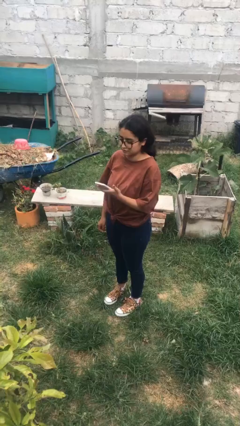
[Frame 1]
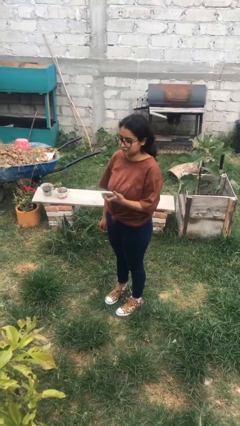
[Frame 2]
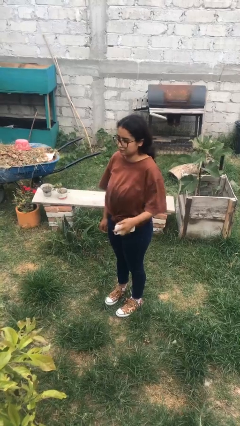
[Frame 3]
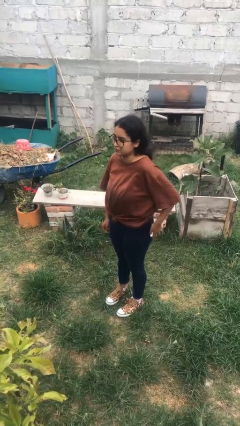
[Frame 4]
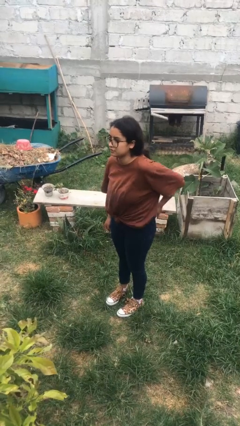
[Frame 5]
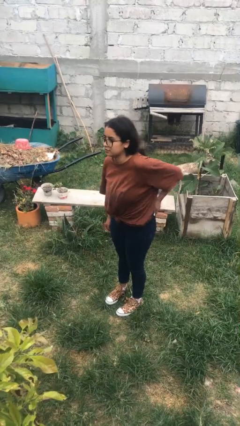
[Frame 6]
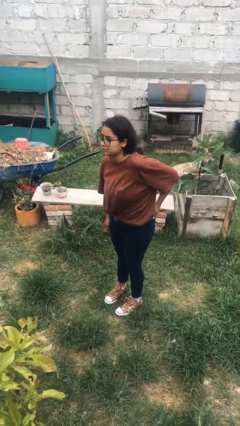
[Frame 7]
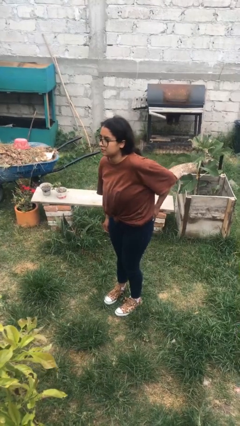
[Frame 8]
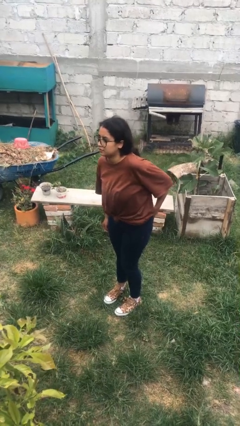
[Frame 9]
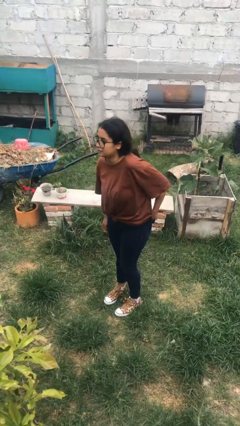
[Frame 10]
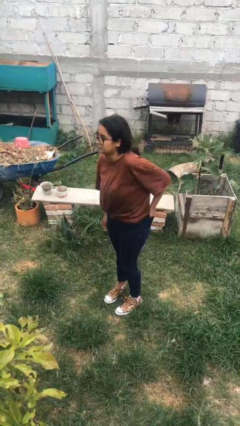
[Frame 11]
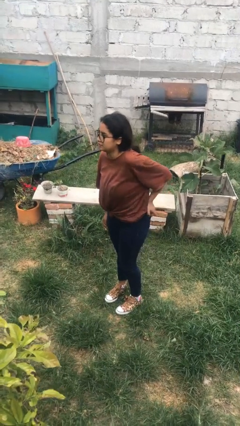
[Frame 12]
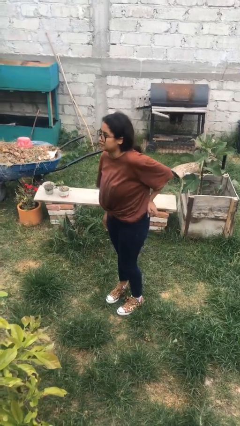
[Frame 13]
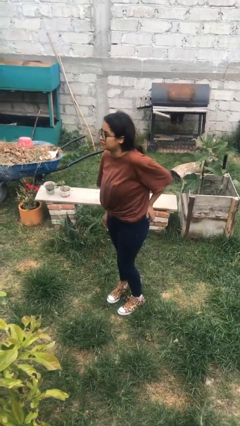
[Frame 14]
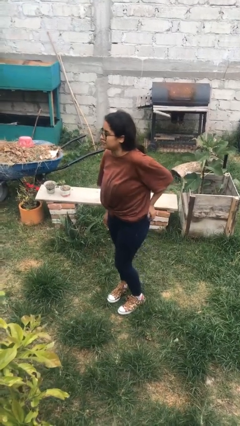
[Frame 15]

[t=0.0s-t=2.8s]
person puts phone into pocket

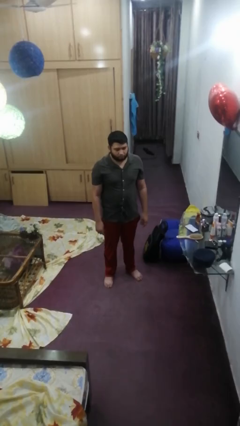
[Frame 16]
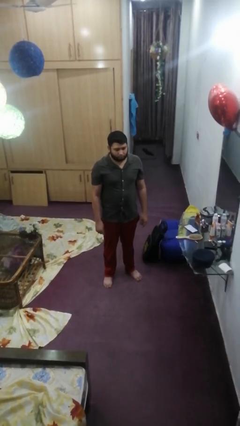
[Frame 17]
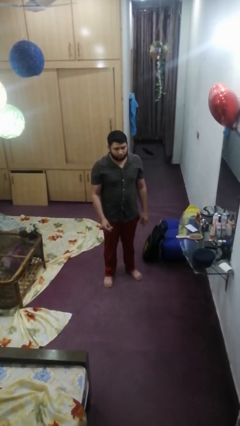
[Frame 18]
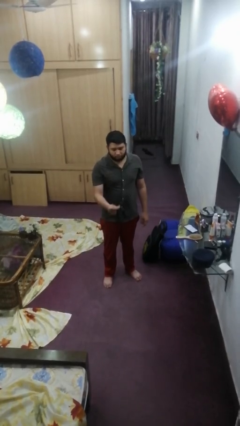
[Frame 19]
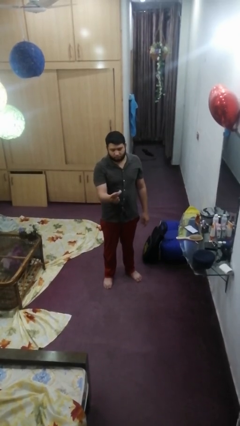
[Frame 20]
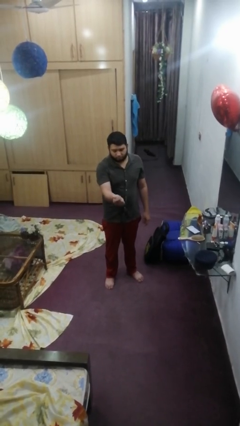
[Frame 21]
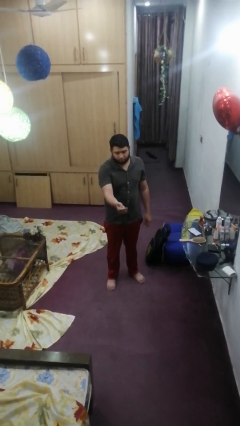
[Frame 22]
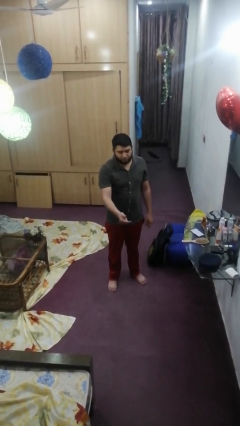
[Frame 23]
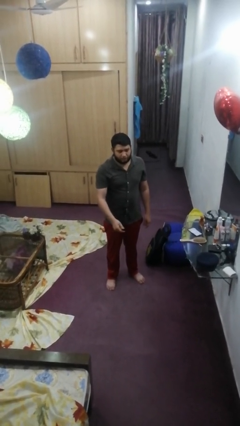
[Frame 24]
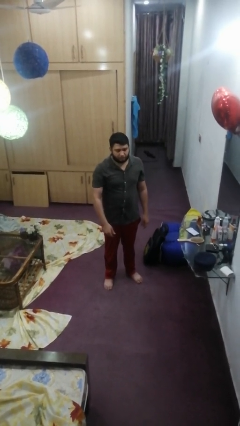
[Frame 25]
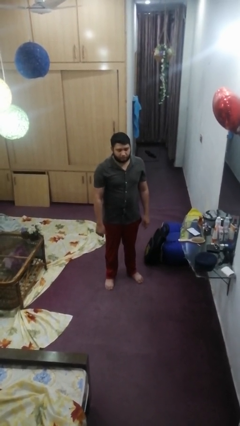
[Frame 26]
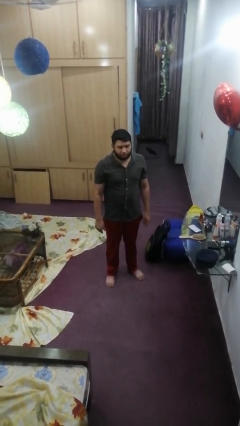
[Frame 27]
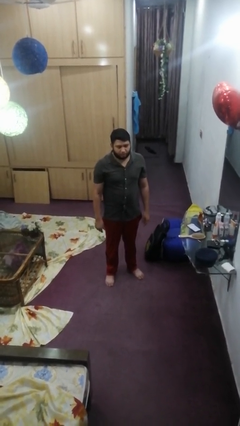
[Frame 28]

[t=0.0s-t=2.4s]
person snaps fingers

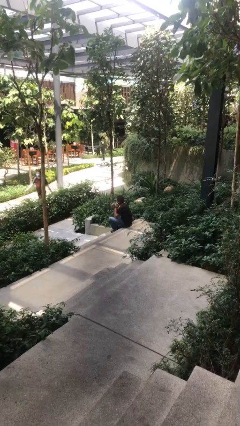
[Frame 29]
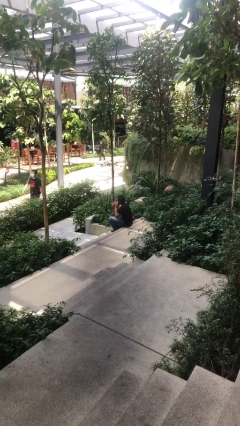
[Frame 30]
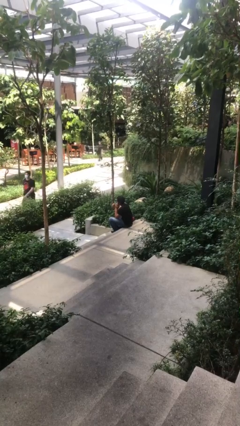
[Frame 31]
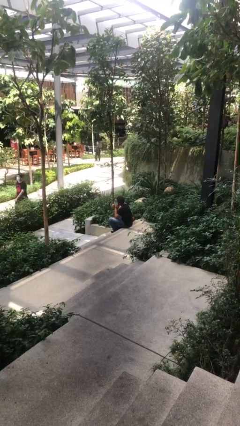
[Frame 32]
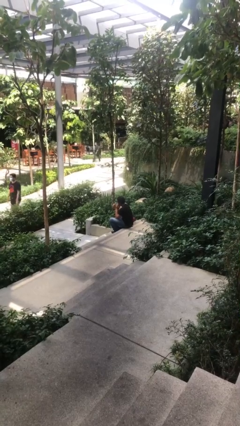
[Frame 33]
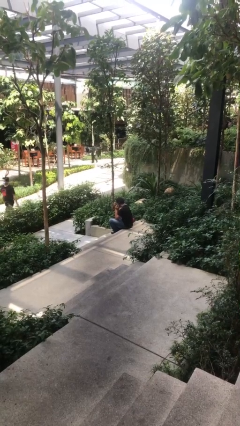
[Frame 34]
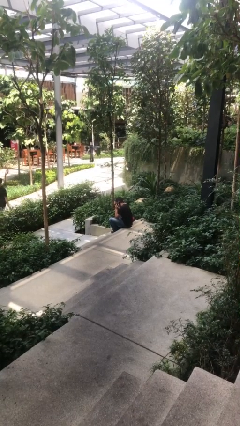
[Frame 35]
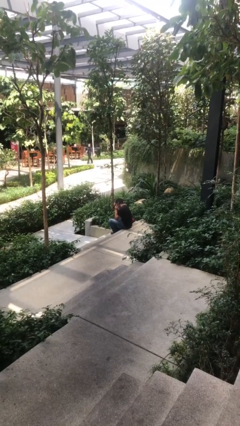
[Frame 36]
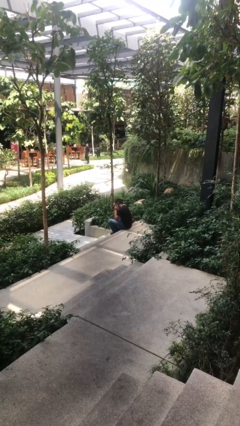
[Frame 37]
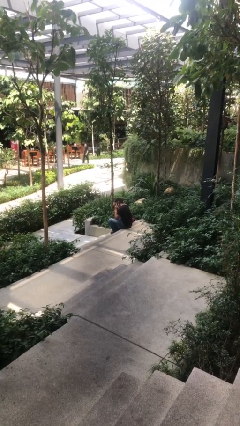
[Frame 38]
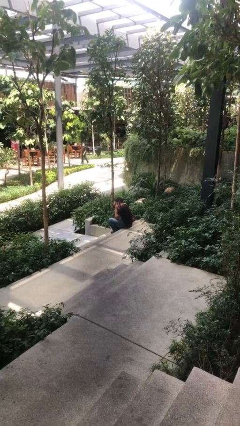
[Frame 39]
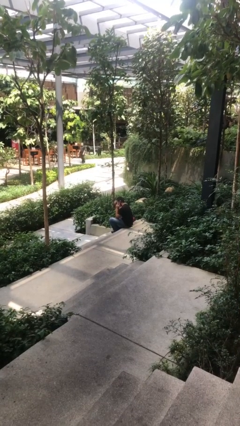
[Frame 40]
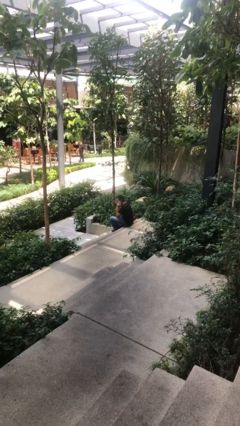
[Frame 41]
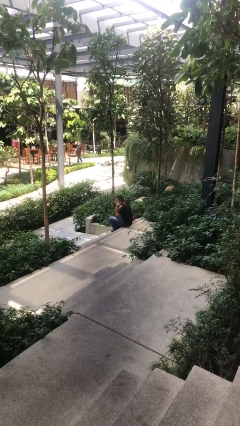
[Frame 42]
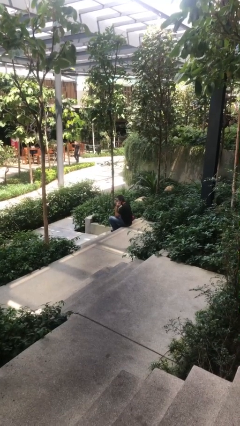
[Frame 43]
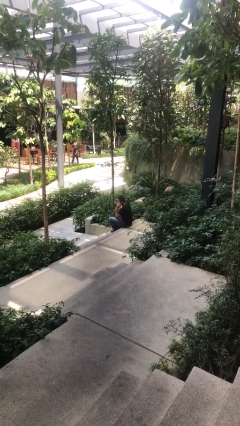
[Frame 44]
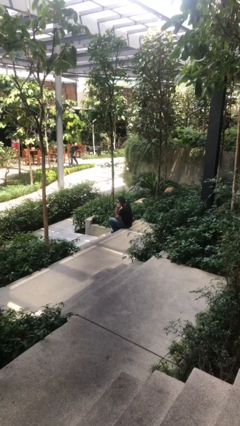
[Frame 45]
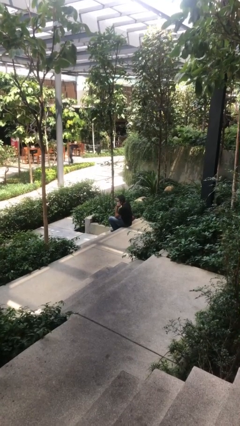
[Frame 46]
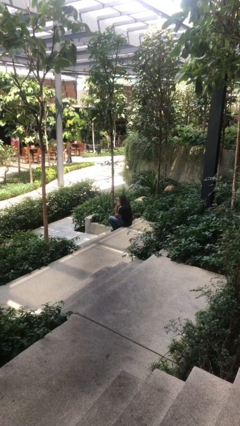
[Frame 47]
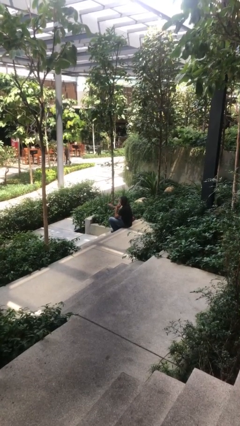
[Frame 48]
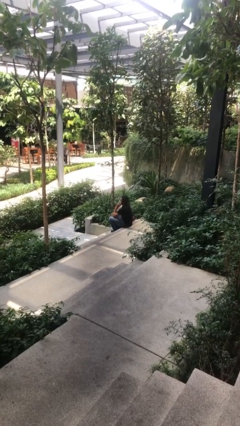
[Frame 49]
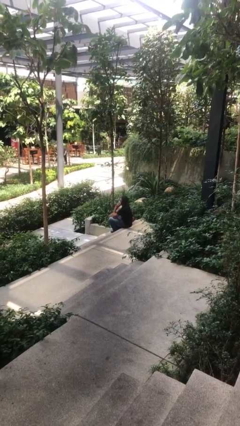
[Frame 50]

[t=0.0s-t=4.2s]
person talks on phone

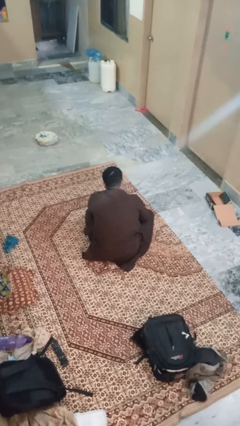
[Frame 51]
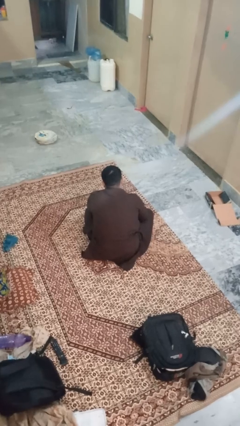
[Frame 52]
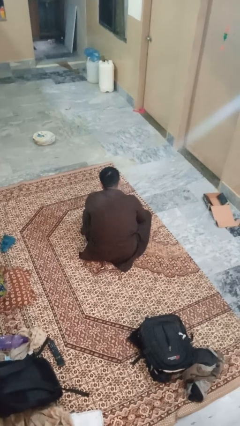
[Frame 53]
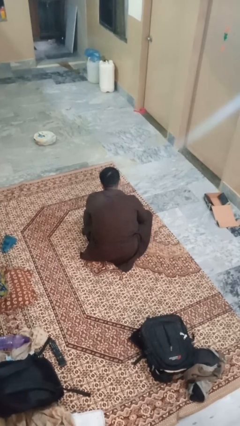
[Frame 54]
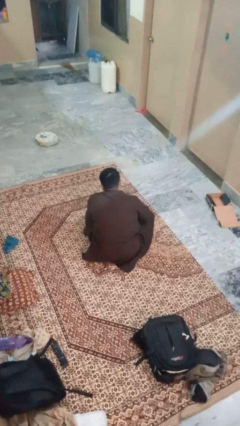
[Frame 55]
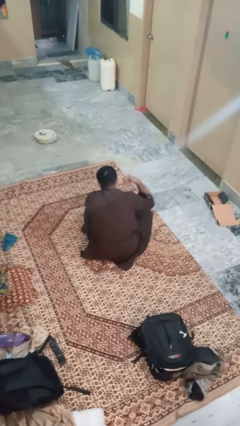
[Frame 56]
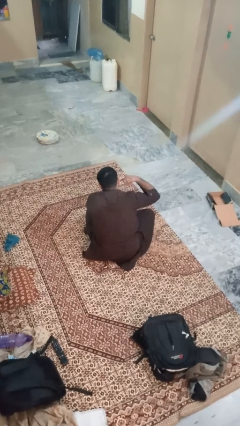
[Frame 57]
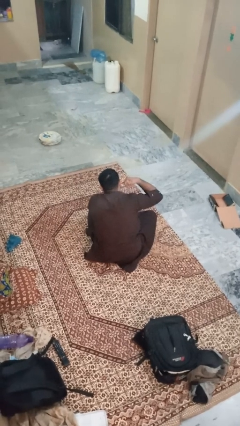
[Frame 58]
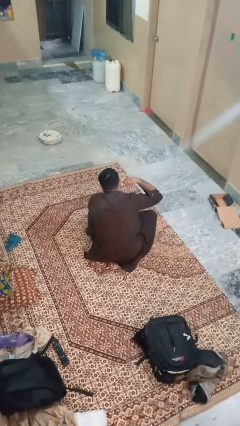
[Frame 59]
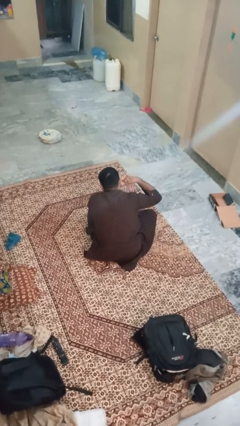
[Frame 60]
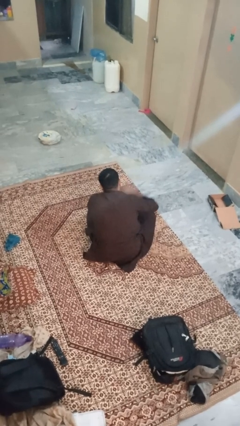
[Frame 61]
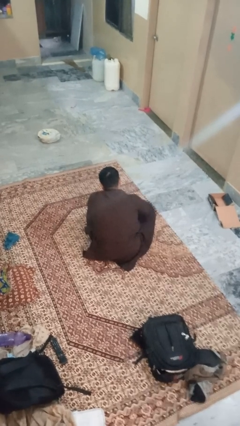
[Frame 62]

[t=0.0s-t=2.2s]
person gestures call me

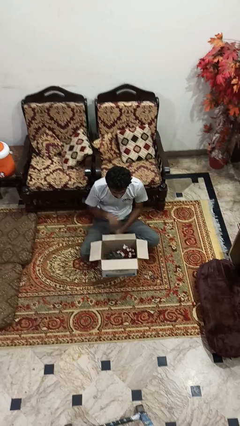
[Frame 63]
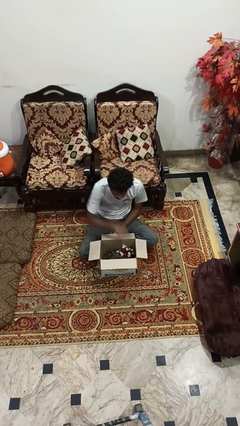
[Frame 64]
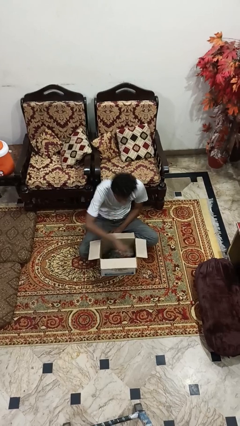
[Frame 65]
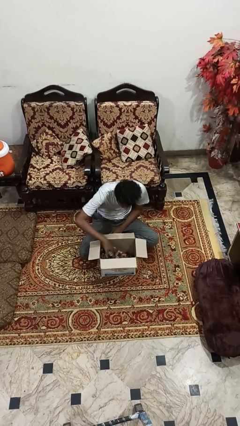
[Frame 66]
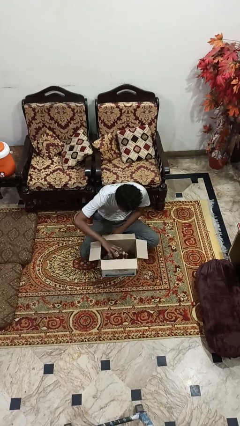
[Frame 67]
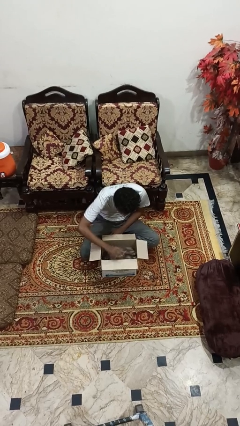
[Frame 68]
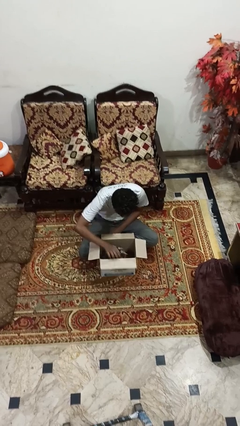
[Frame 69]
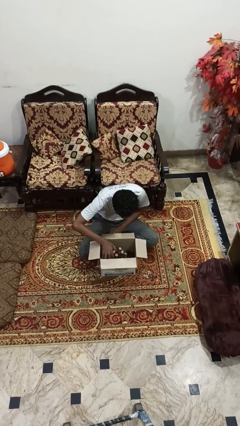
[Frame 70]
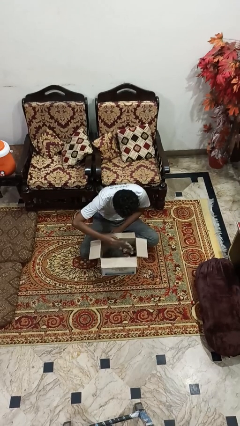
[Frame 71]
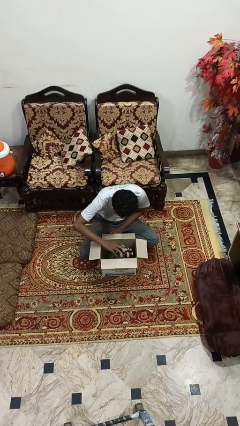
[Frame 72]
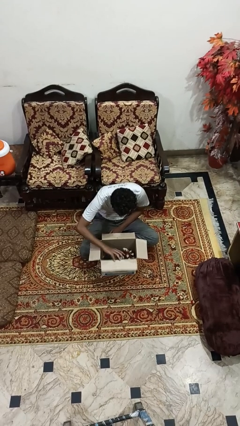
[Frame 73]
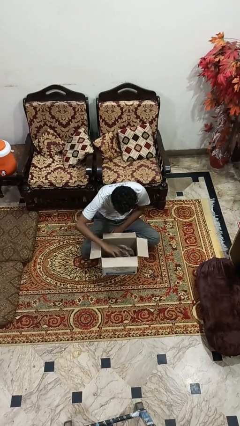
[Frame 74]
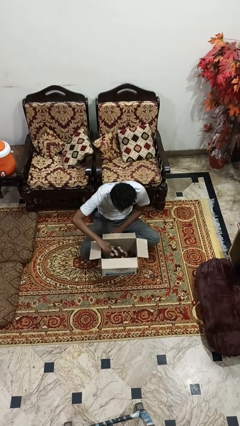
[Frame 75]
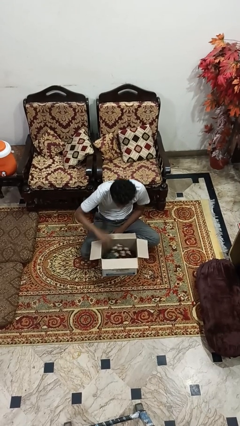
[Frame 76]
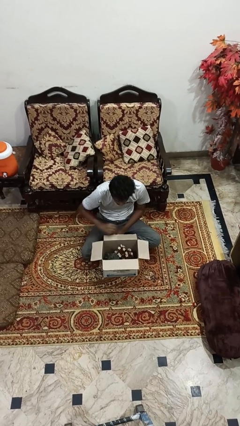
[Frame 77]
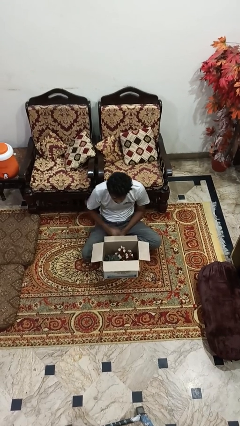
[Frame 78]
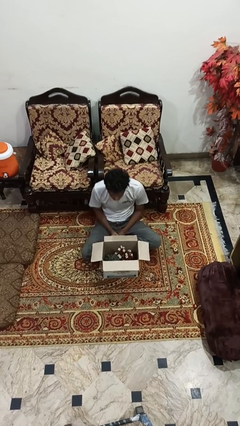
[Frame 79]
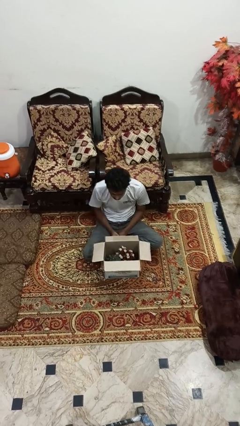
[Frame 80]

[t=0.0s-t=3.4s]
person searches in box

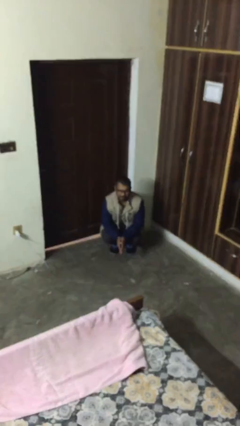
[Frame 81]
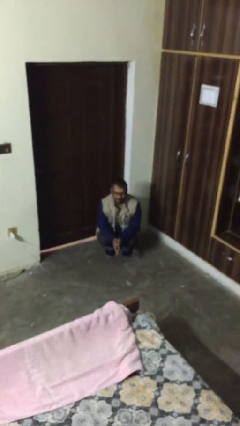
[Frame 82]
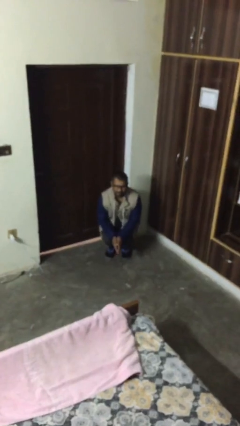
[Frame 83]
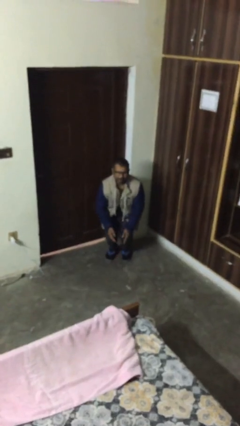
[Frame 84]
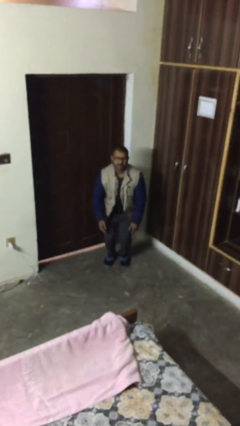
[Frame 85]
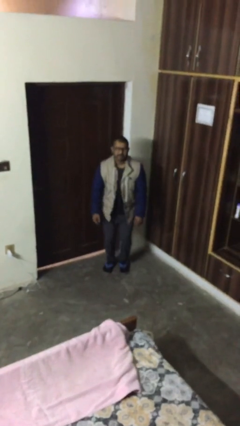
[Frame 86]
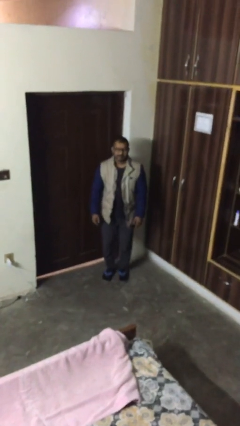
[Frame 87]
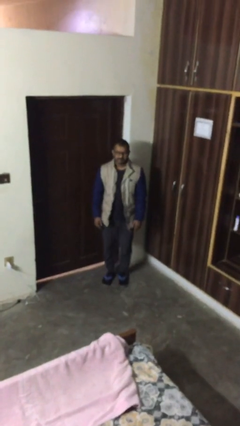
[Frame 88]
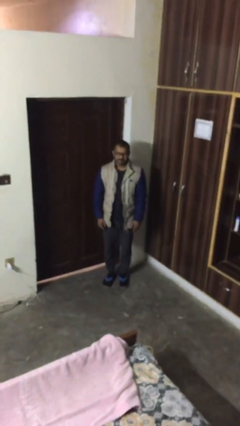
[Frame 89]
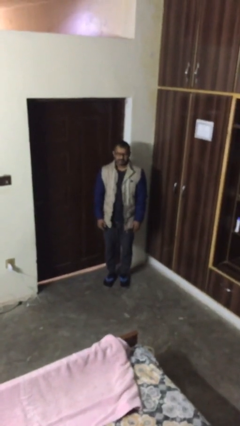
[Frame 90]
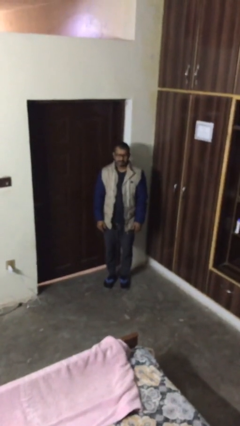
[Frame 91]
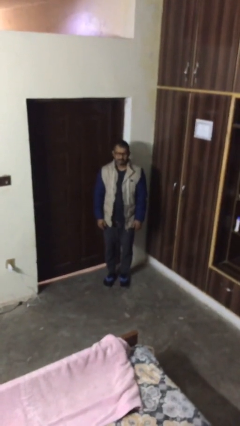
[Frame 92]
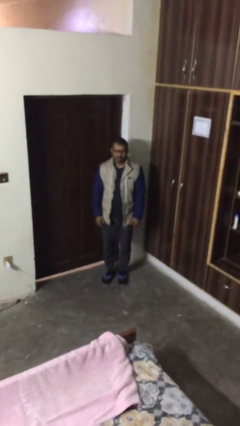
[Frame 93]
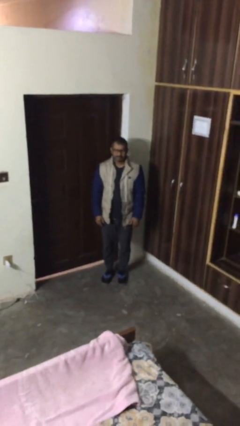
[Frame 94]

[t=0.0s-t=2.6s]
person stands up
